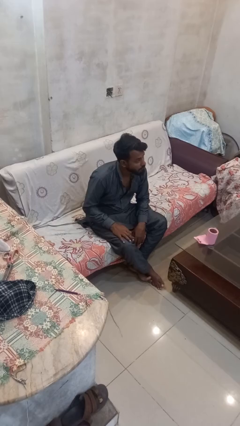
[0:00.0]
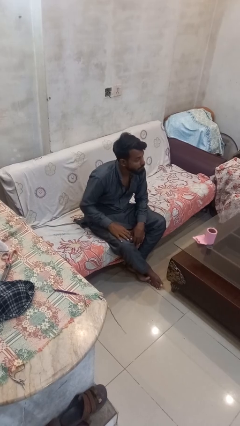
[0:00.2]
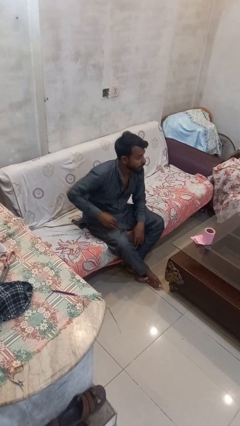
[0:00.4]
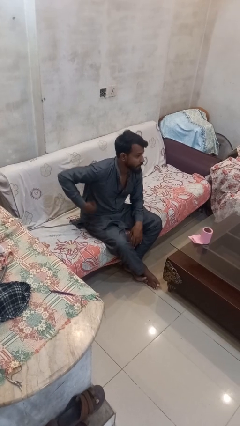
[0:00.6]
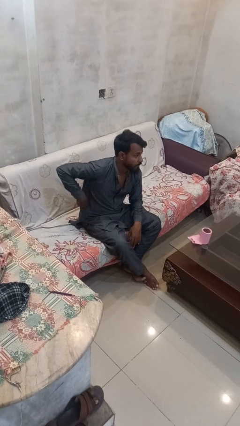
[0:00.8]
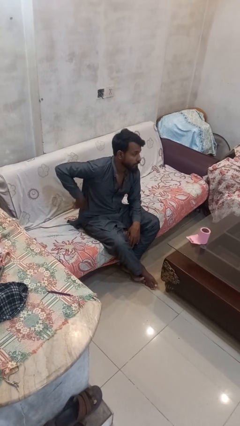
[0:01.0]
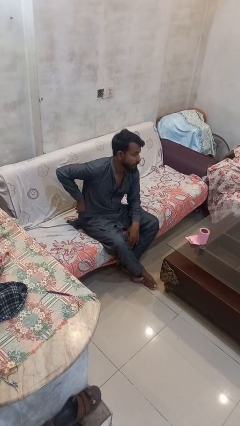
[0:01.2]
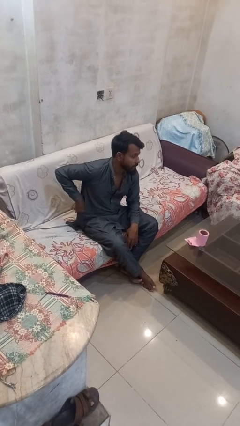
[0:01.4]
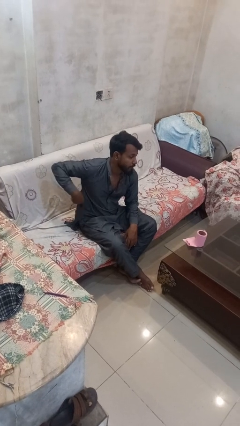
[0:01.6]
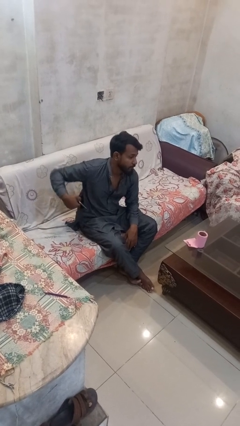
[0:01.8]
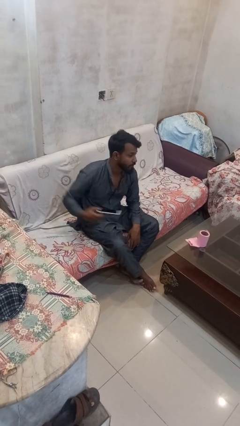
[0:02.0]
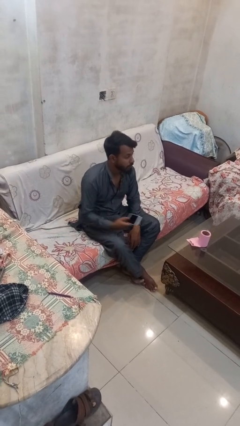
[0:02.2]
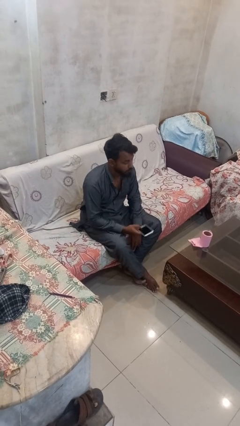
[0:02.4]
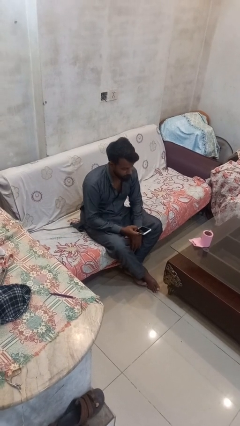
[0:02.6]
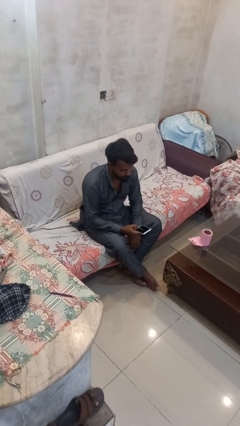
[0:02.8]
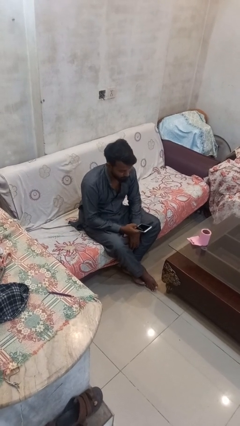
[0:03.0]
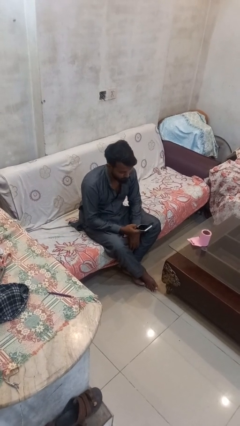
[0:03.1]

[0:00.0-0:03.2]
person takes phone from pocket

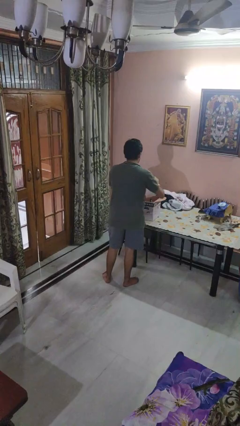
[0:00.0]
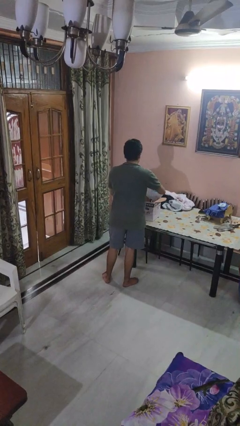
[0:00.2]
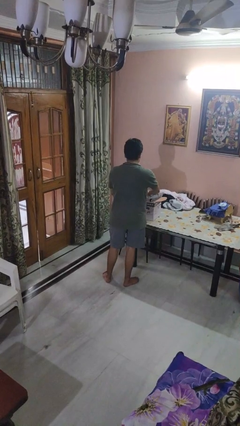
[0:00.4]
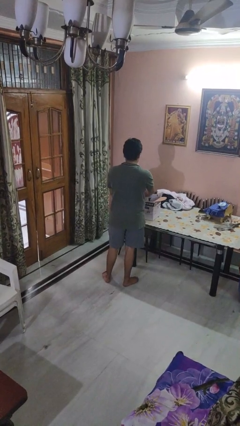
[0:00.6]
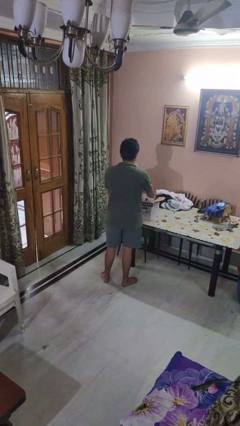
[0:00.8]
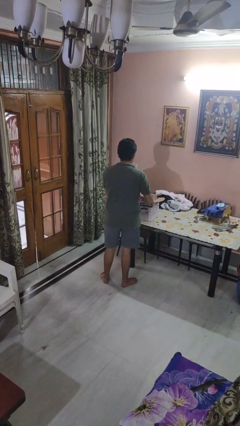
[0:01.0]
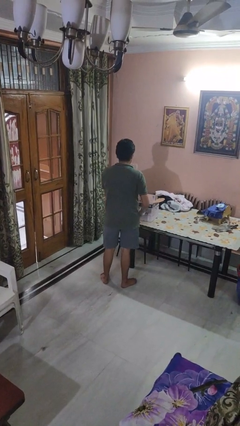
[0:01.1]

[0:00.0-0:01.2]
person puts object into box

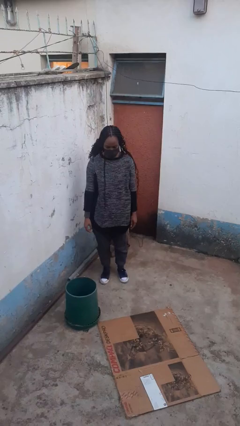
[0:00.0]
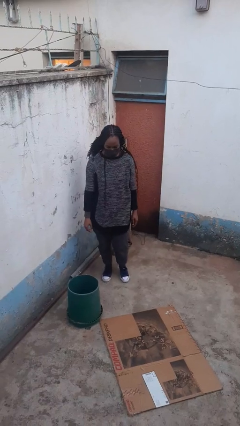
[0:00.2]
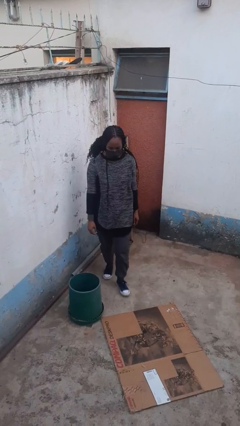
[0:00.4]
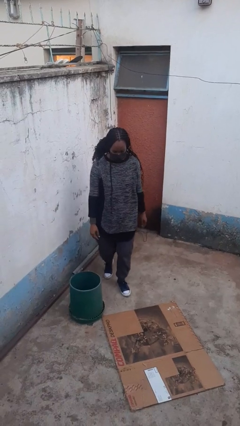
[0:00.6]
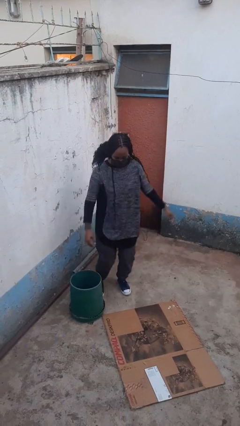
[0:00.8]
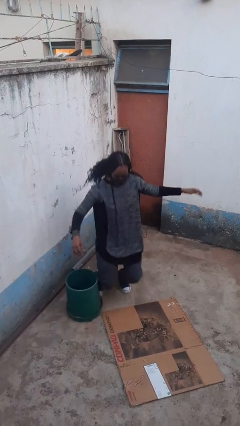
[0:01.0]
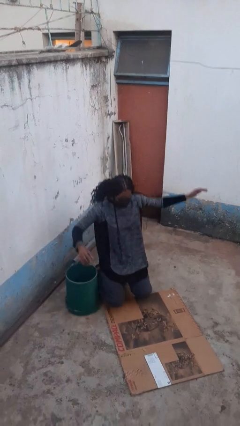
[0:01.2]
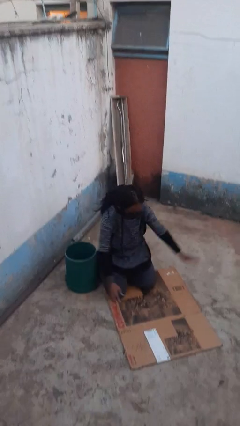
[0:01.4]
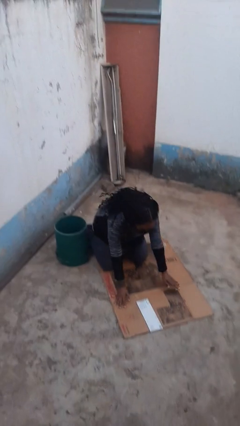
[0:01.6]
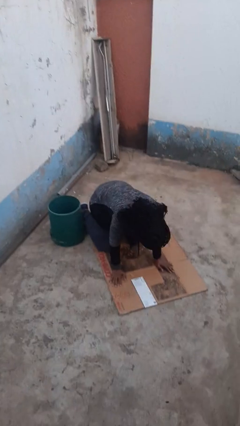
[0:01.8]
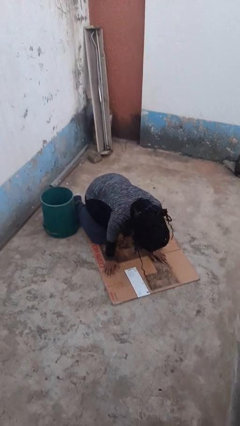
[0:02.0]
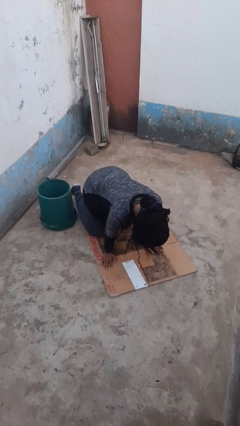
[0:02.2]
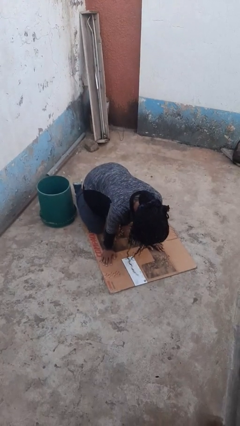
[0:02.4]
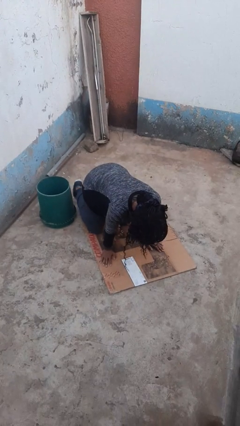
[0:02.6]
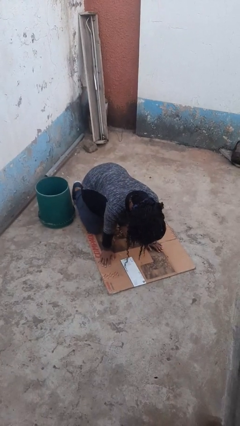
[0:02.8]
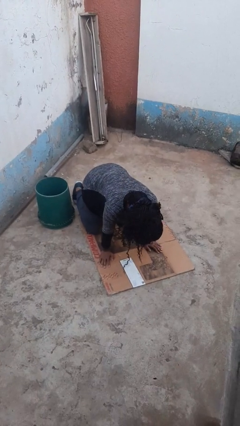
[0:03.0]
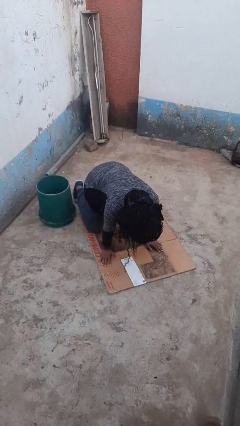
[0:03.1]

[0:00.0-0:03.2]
person trips on object on floor

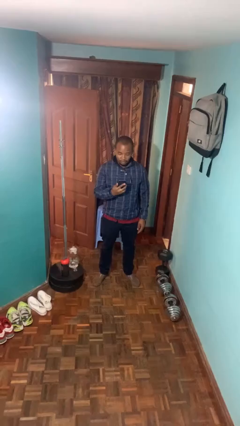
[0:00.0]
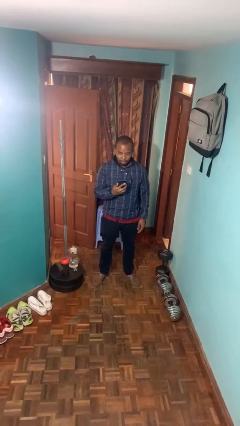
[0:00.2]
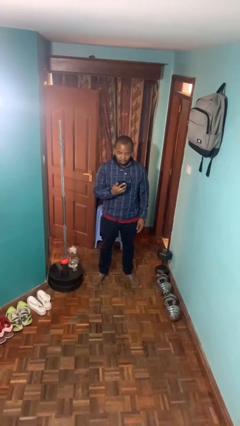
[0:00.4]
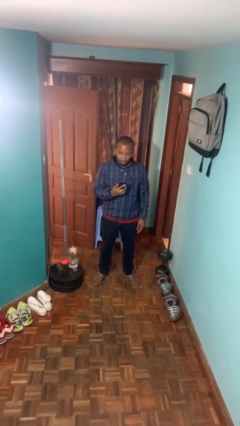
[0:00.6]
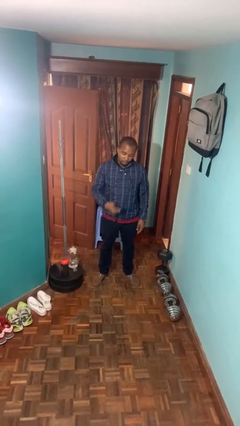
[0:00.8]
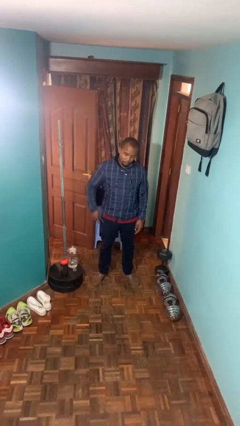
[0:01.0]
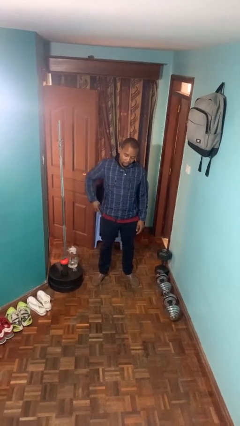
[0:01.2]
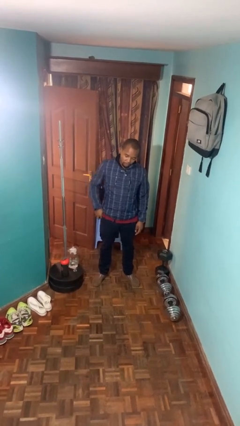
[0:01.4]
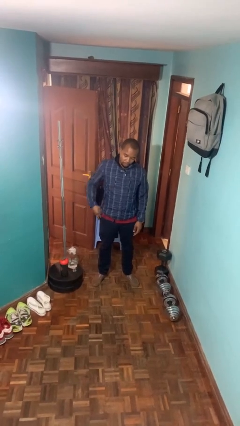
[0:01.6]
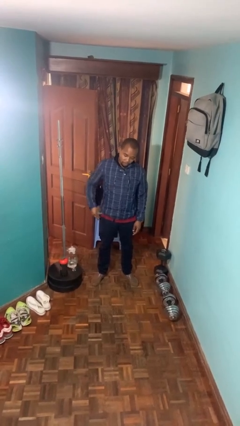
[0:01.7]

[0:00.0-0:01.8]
person puts phone into pocket

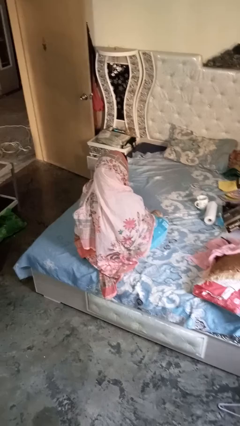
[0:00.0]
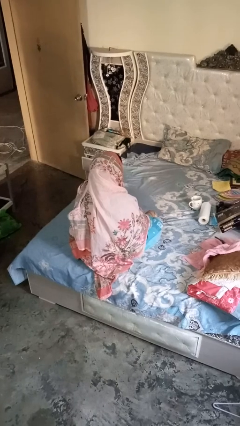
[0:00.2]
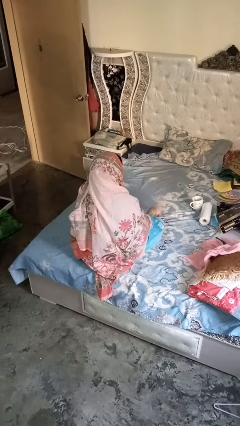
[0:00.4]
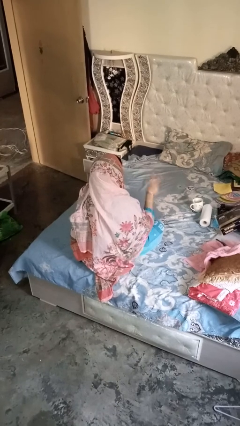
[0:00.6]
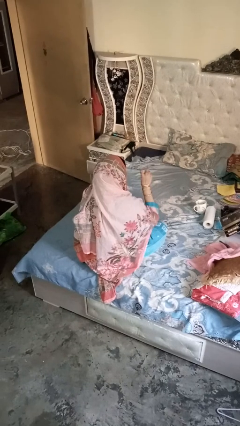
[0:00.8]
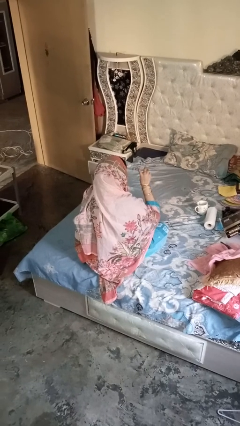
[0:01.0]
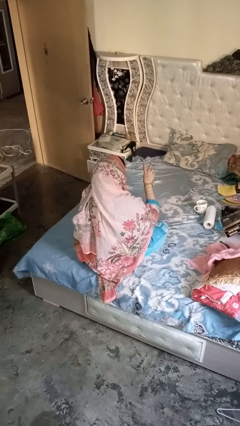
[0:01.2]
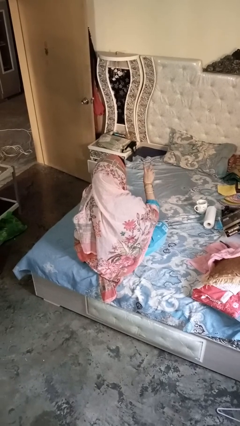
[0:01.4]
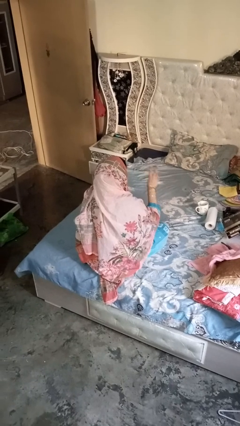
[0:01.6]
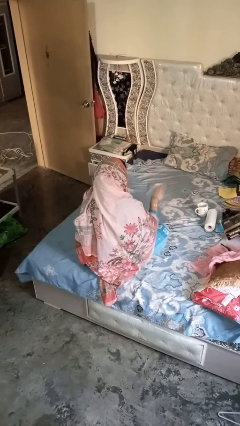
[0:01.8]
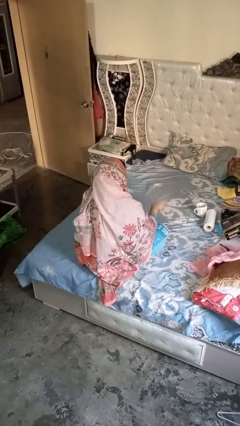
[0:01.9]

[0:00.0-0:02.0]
person gestures be quiet

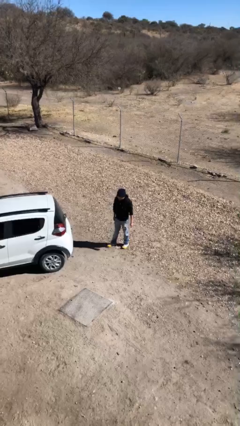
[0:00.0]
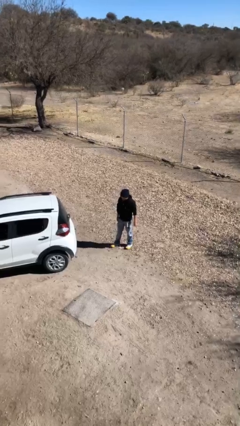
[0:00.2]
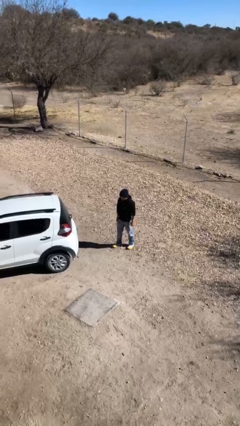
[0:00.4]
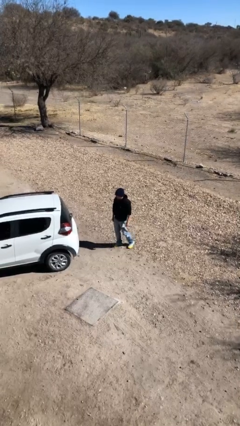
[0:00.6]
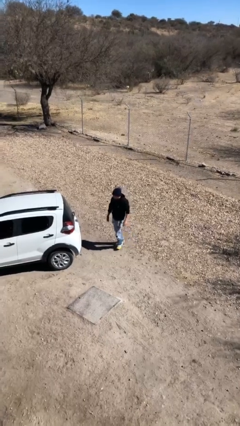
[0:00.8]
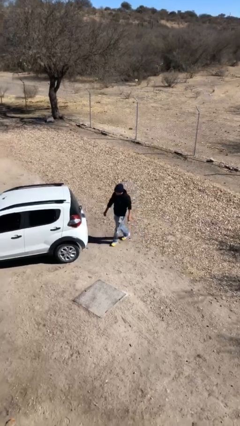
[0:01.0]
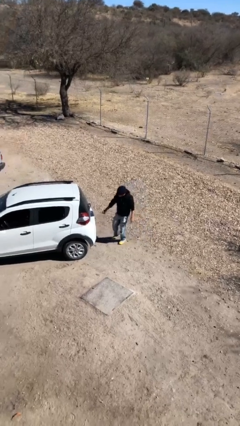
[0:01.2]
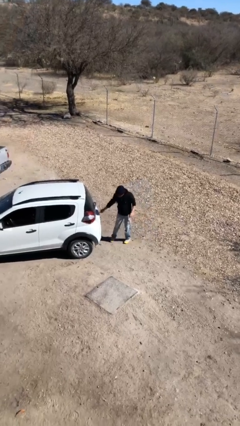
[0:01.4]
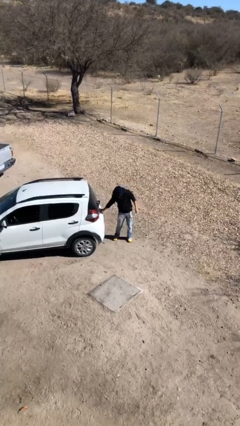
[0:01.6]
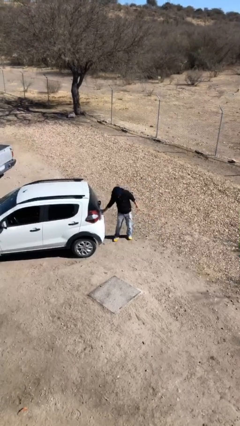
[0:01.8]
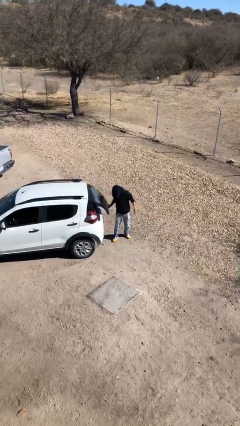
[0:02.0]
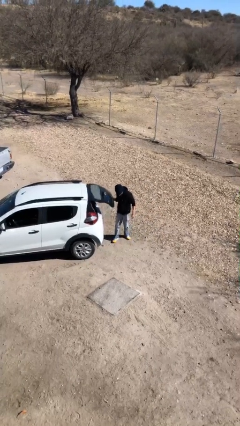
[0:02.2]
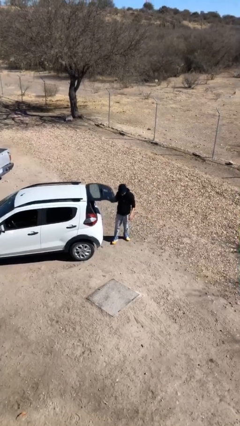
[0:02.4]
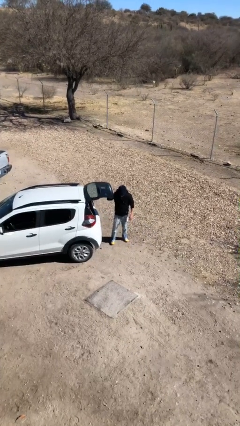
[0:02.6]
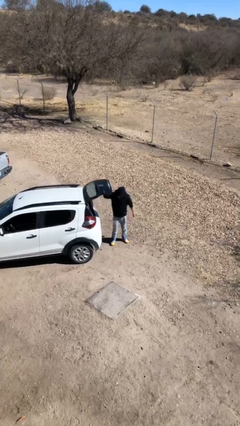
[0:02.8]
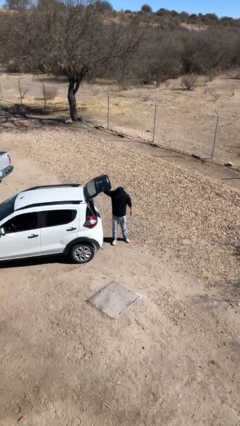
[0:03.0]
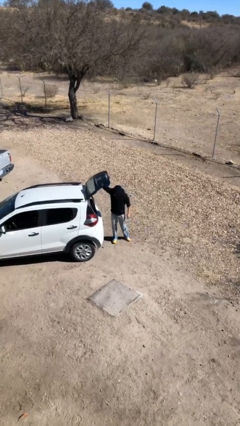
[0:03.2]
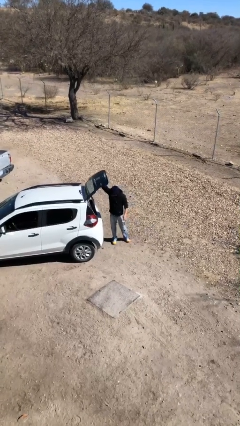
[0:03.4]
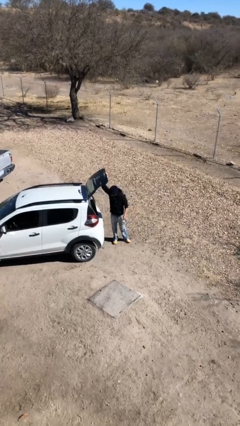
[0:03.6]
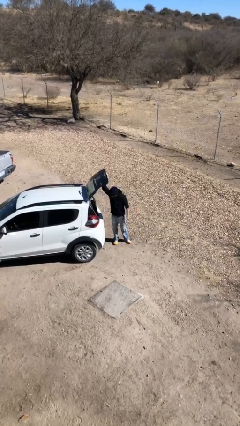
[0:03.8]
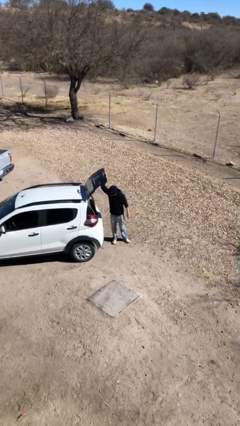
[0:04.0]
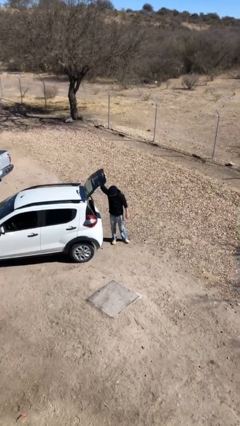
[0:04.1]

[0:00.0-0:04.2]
person opens car trunk

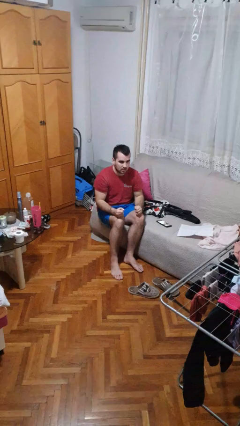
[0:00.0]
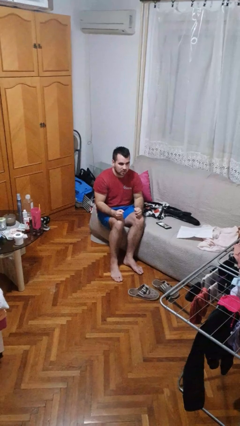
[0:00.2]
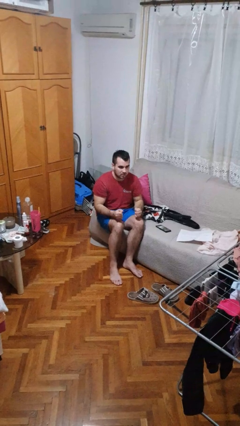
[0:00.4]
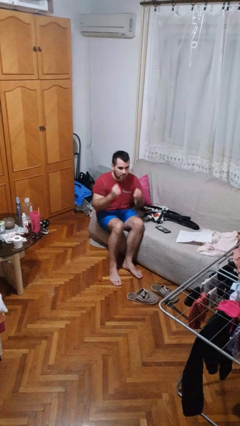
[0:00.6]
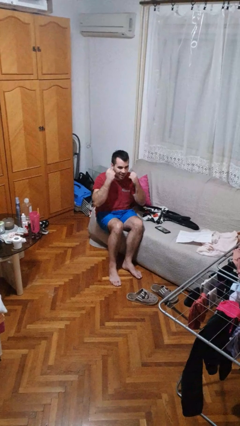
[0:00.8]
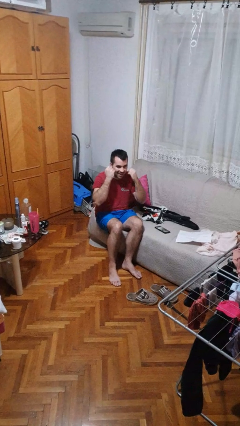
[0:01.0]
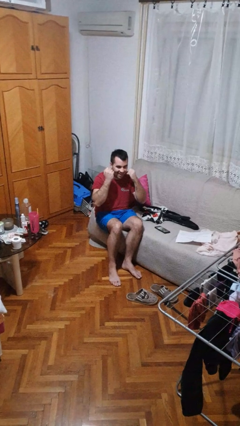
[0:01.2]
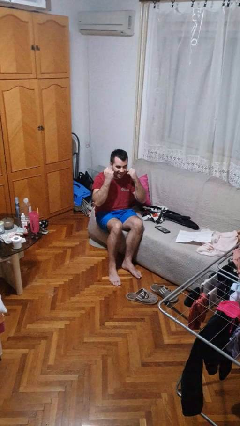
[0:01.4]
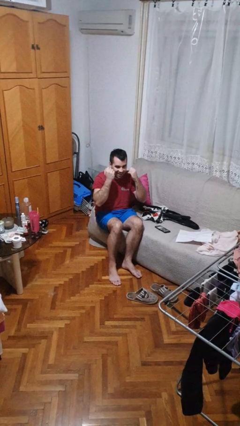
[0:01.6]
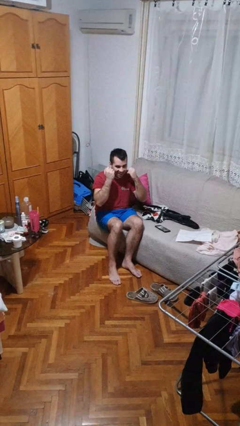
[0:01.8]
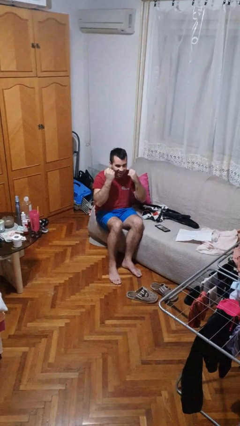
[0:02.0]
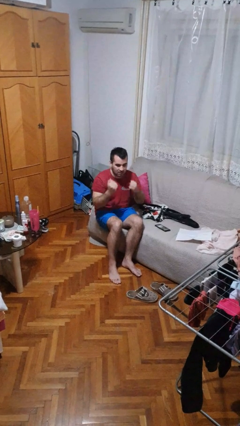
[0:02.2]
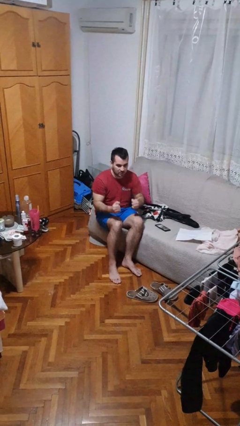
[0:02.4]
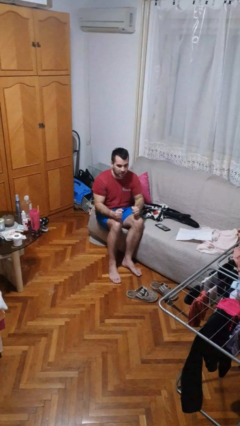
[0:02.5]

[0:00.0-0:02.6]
person flosses
